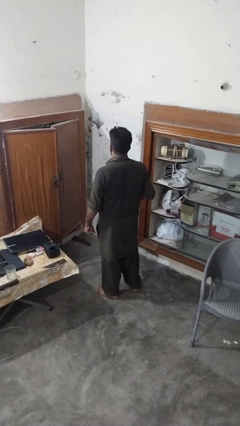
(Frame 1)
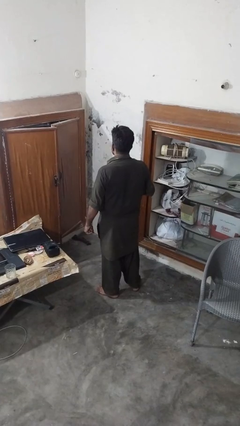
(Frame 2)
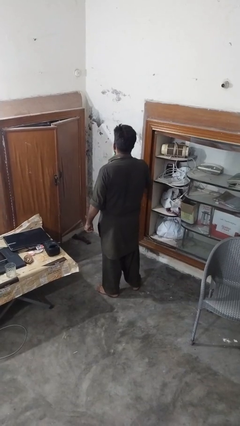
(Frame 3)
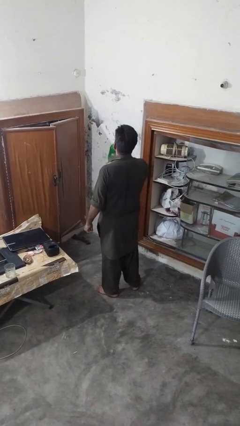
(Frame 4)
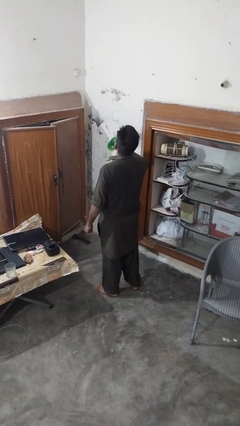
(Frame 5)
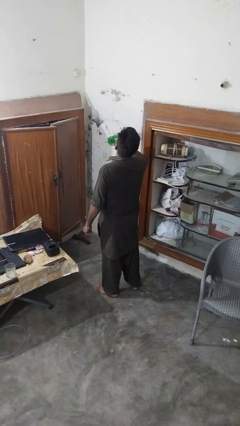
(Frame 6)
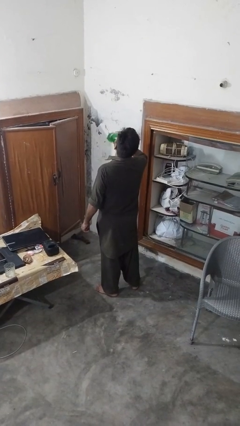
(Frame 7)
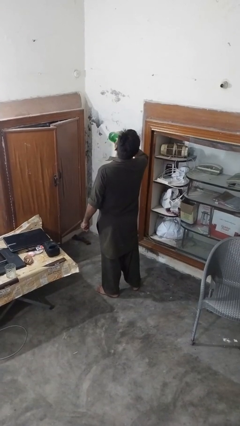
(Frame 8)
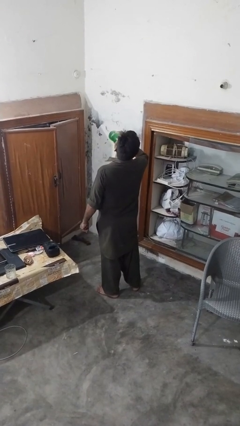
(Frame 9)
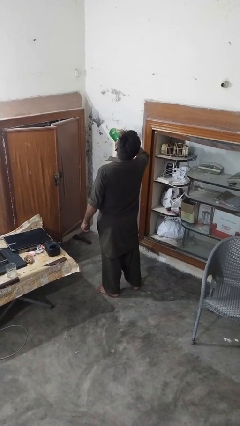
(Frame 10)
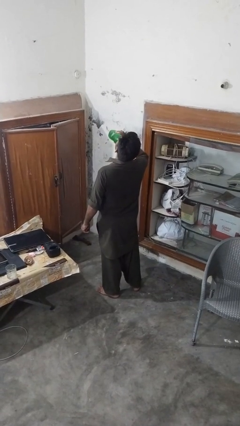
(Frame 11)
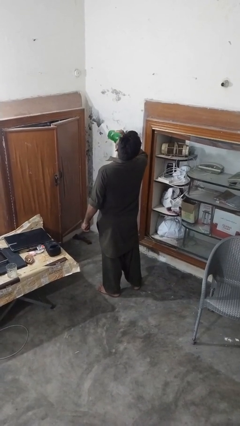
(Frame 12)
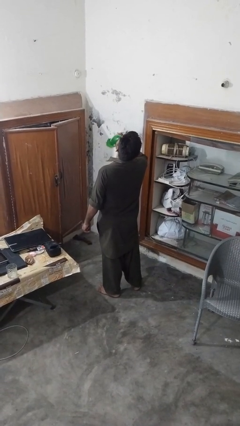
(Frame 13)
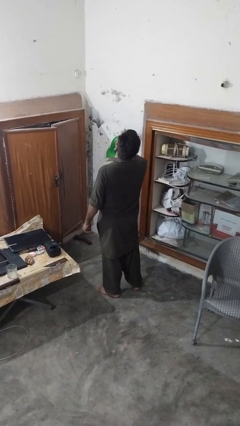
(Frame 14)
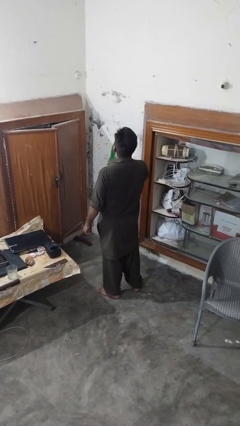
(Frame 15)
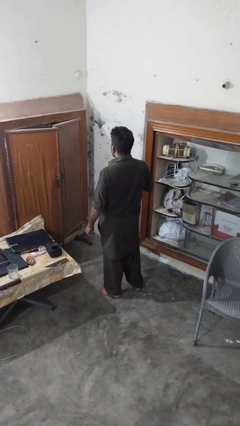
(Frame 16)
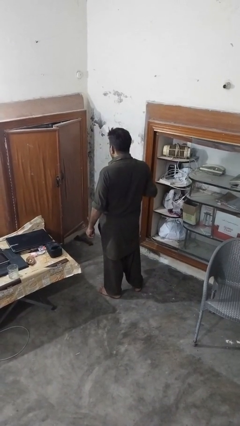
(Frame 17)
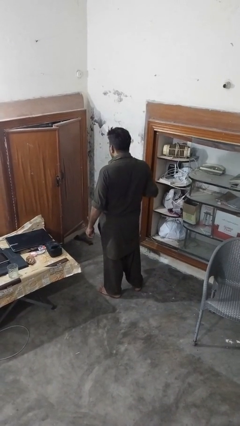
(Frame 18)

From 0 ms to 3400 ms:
person drinks from bottle

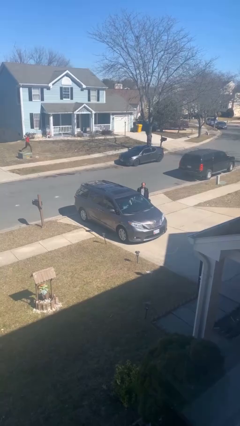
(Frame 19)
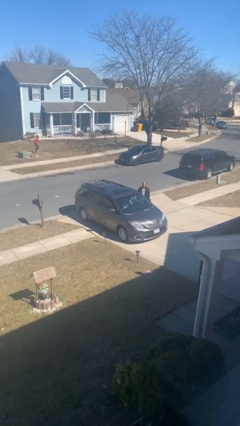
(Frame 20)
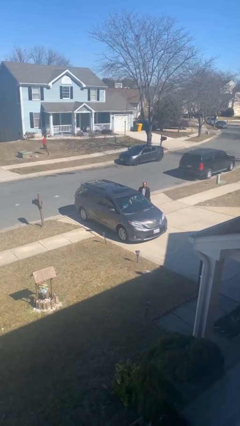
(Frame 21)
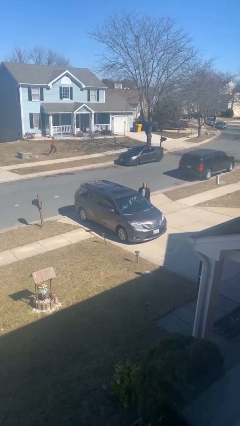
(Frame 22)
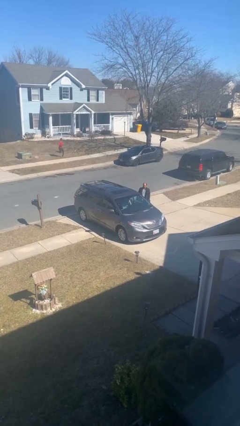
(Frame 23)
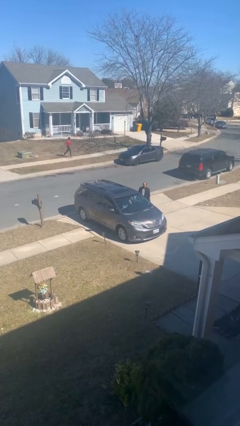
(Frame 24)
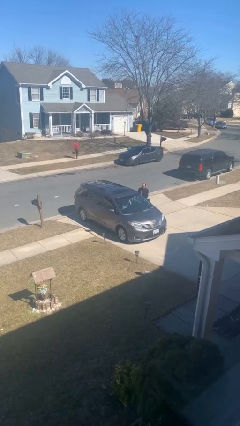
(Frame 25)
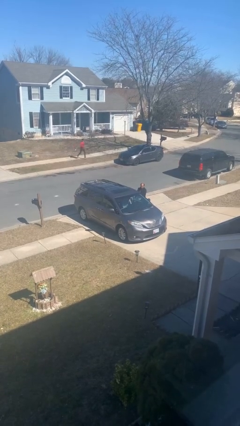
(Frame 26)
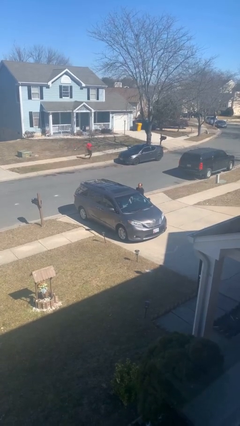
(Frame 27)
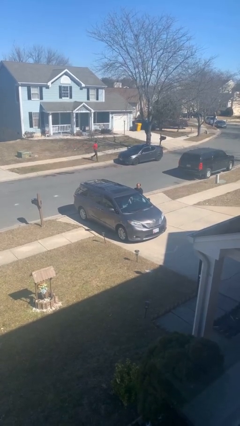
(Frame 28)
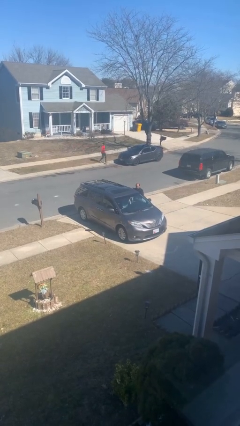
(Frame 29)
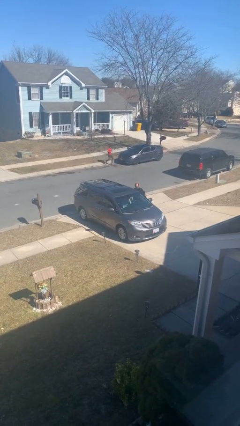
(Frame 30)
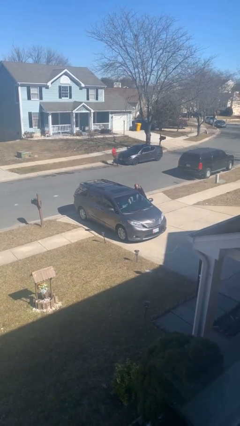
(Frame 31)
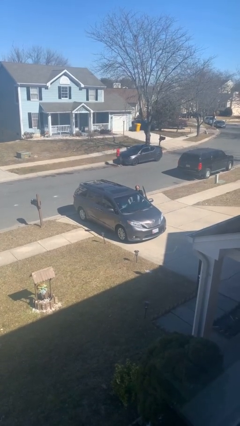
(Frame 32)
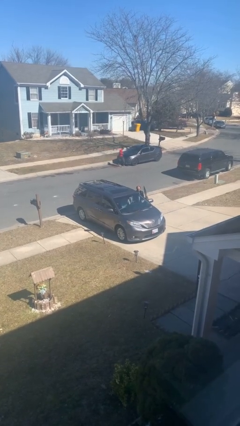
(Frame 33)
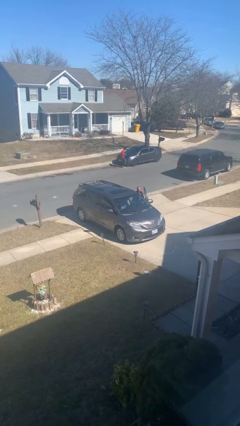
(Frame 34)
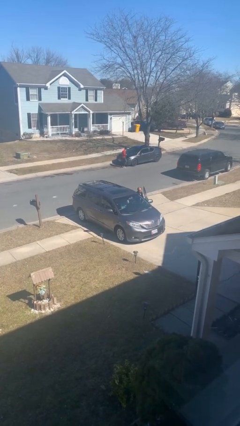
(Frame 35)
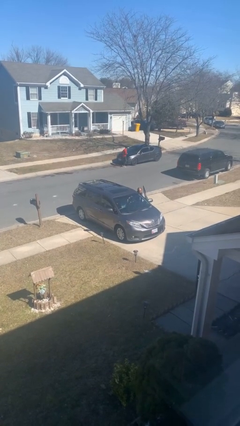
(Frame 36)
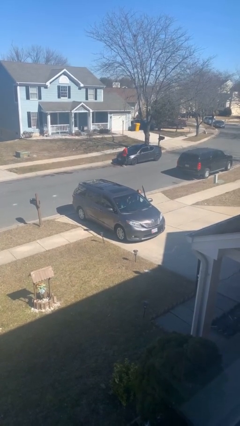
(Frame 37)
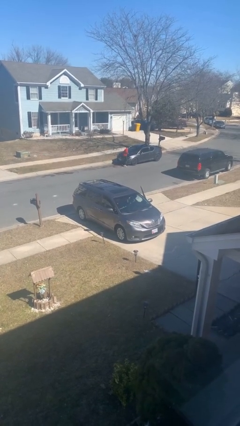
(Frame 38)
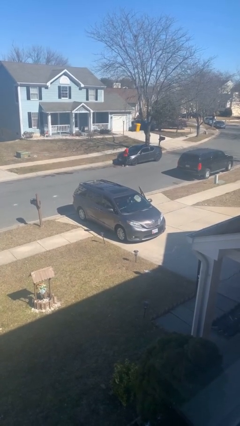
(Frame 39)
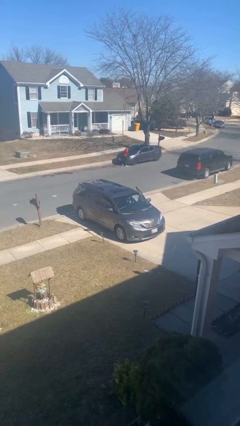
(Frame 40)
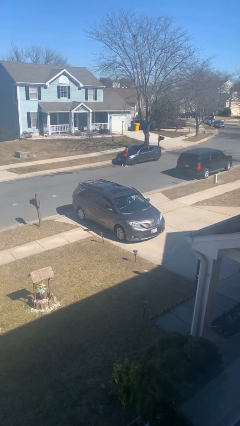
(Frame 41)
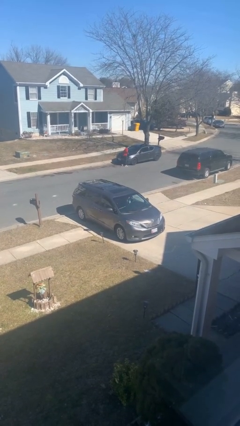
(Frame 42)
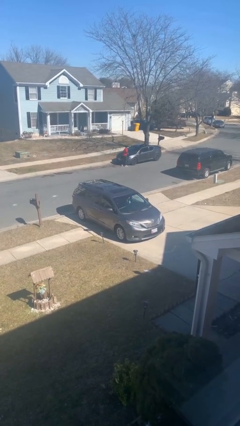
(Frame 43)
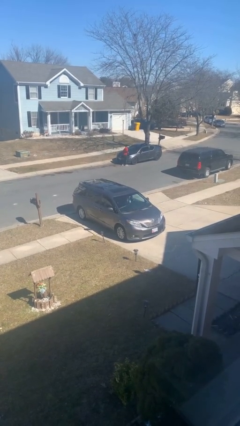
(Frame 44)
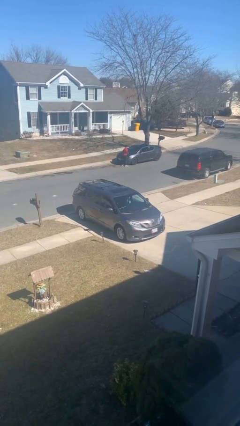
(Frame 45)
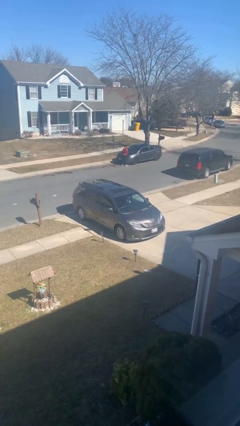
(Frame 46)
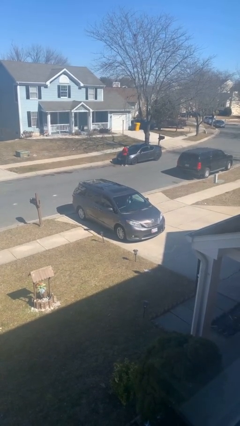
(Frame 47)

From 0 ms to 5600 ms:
car picks up person

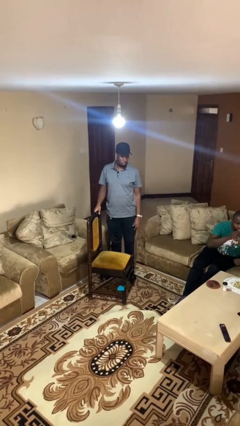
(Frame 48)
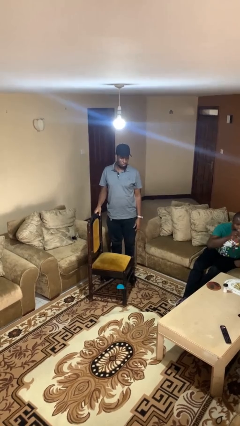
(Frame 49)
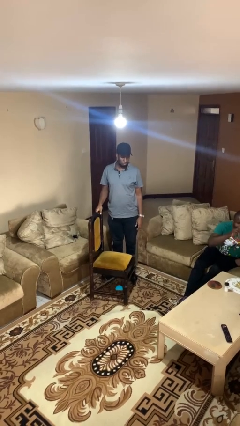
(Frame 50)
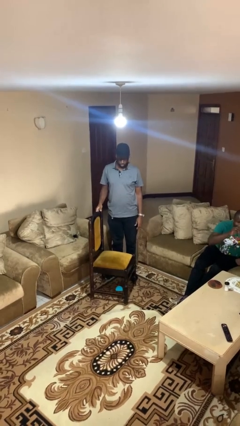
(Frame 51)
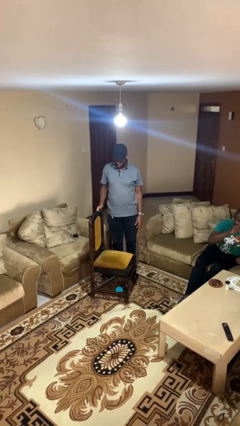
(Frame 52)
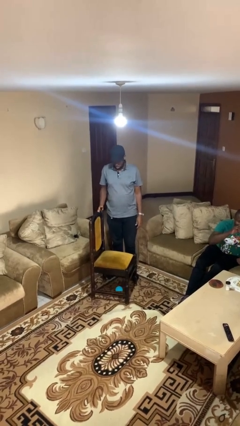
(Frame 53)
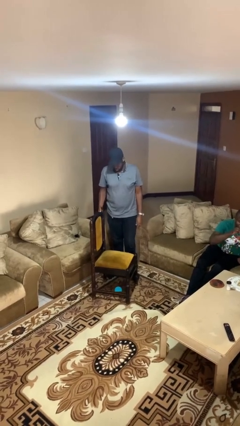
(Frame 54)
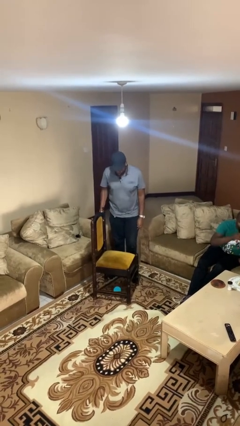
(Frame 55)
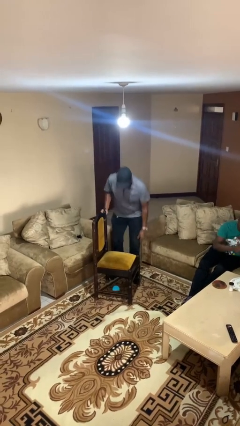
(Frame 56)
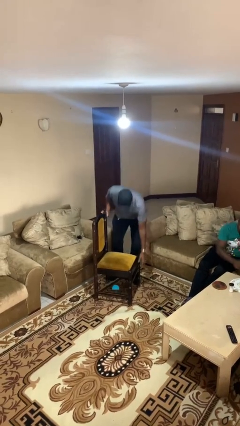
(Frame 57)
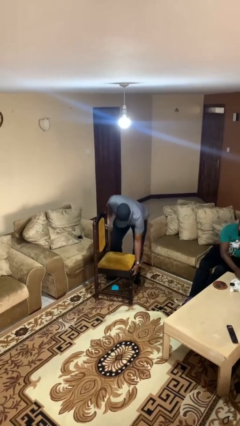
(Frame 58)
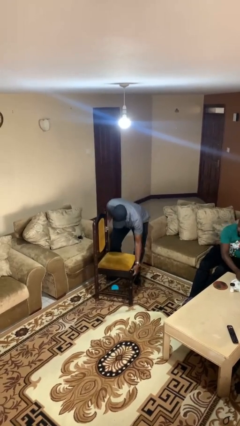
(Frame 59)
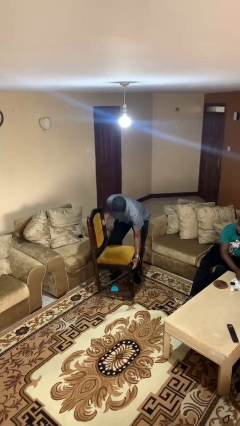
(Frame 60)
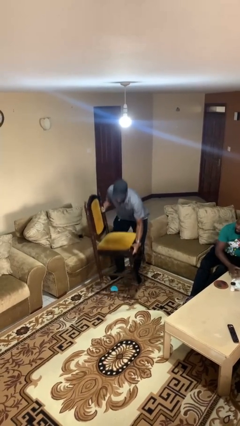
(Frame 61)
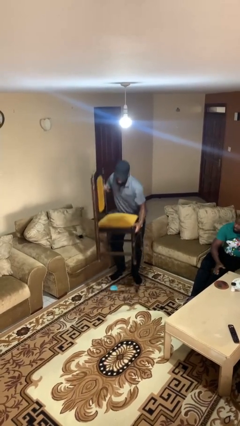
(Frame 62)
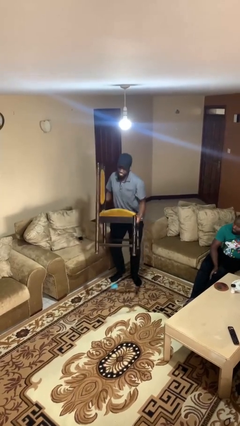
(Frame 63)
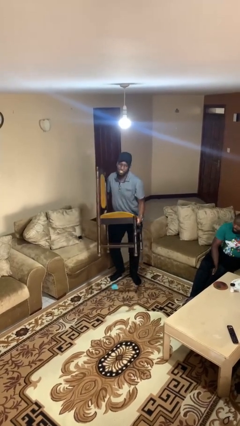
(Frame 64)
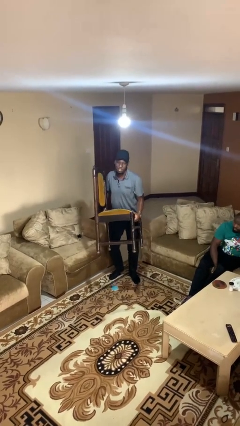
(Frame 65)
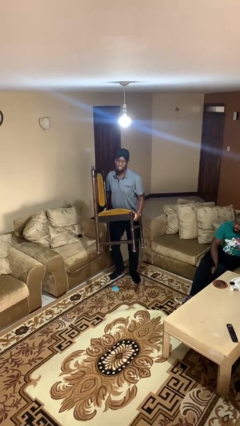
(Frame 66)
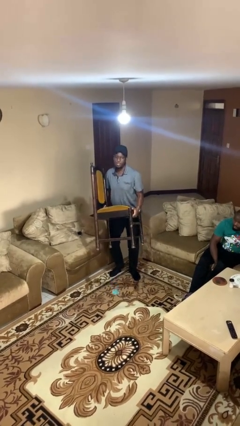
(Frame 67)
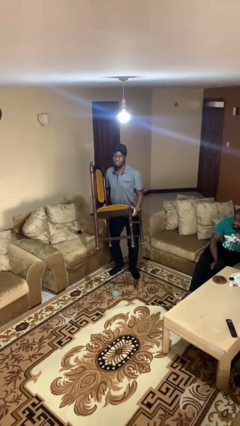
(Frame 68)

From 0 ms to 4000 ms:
person picks up object from floor

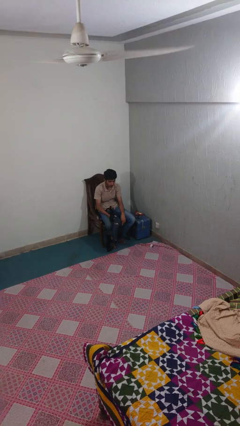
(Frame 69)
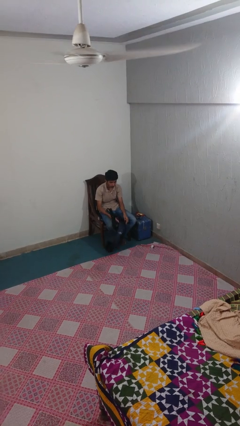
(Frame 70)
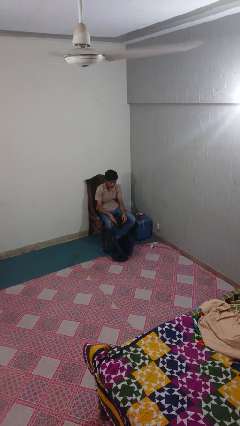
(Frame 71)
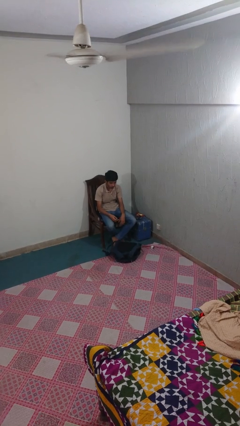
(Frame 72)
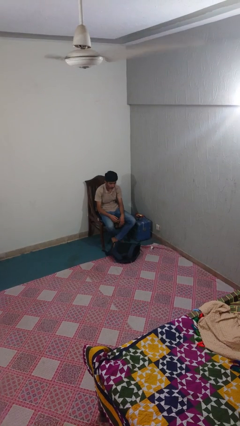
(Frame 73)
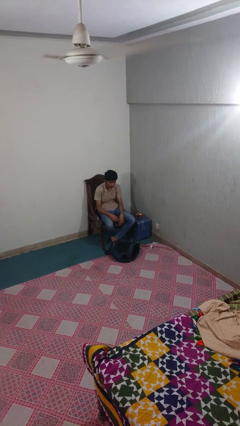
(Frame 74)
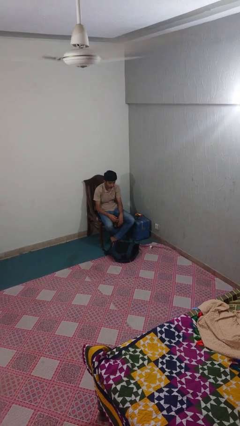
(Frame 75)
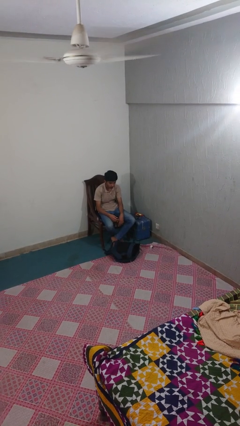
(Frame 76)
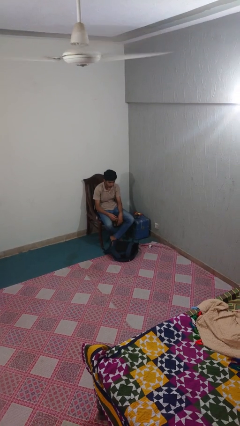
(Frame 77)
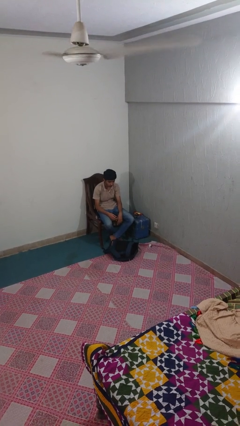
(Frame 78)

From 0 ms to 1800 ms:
person drops object

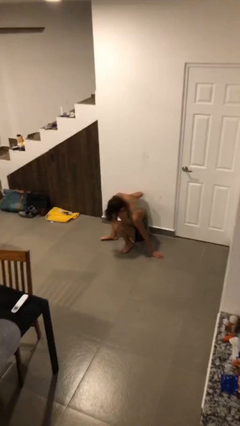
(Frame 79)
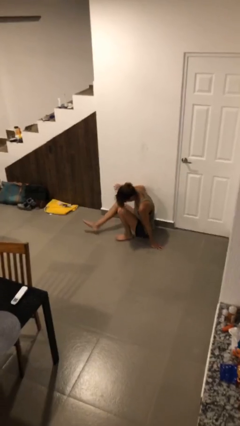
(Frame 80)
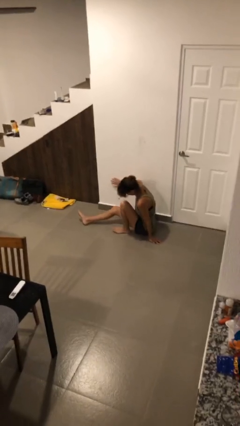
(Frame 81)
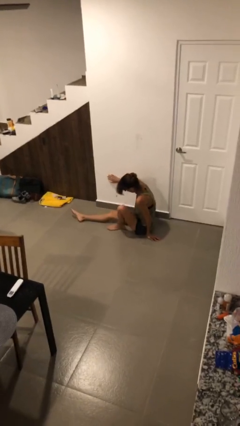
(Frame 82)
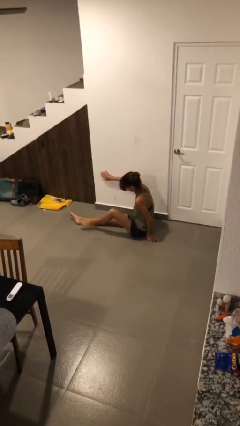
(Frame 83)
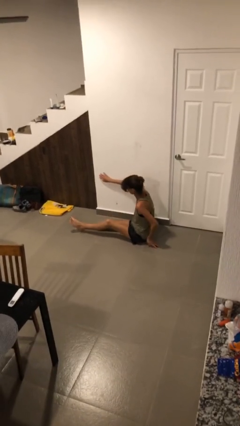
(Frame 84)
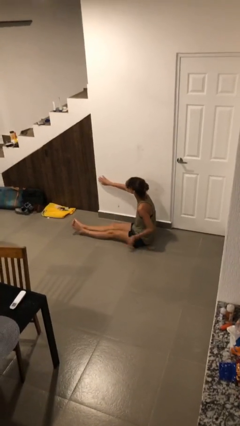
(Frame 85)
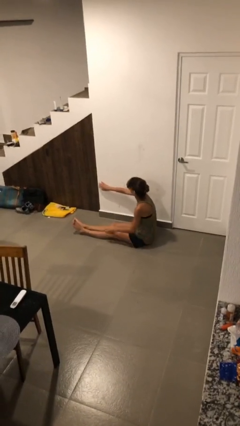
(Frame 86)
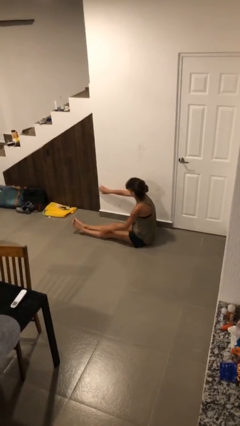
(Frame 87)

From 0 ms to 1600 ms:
person sits down

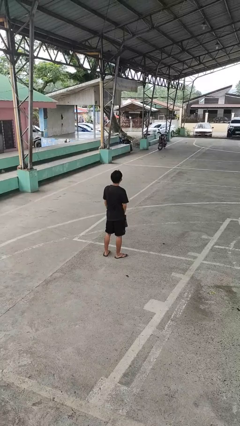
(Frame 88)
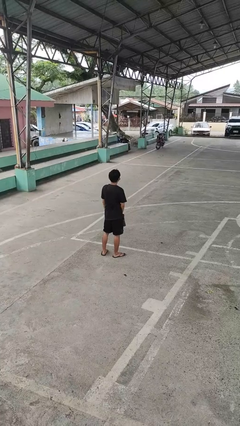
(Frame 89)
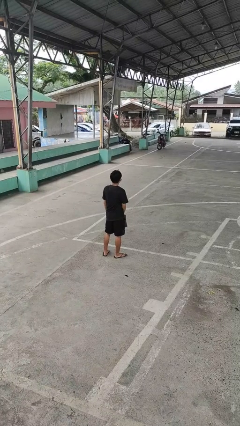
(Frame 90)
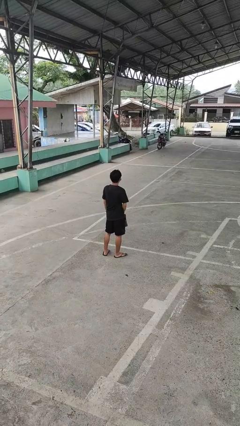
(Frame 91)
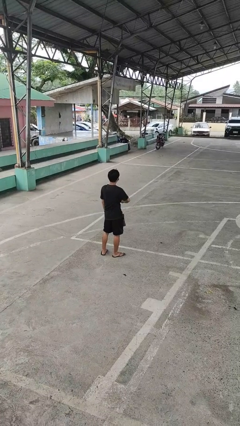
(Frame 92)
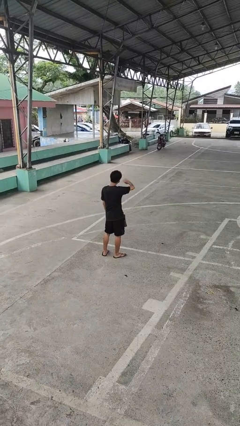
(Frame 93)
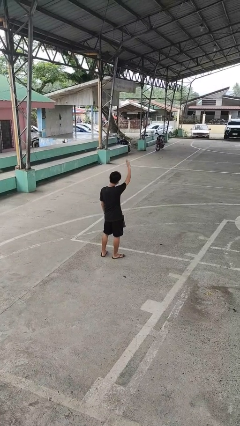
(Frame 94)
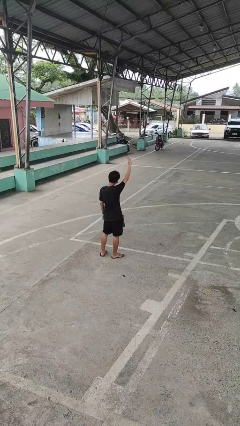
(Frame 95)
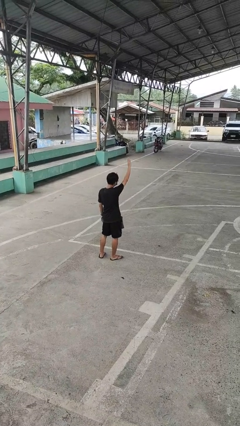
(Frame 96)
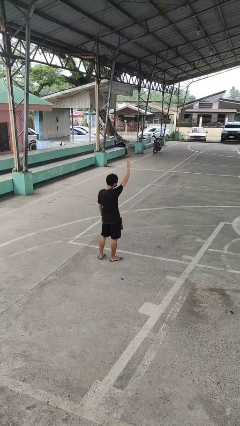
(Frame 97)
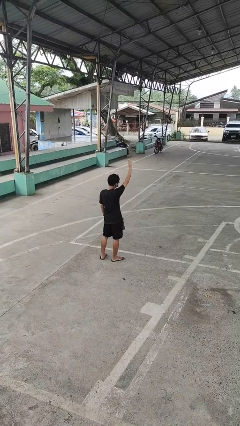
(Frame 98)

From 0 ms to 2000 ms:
person gestures swipe up
